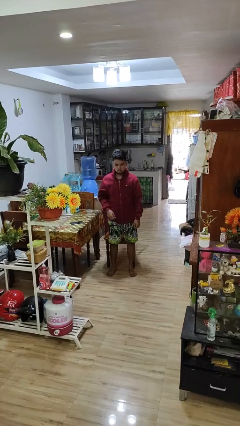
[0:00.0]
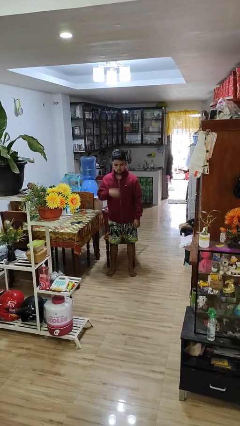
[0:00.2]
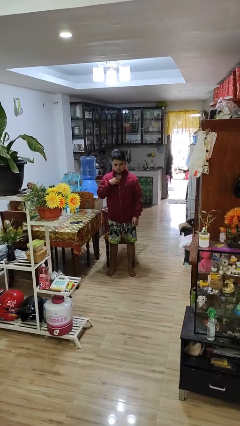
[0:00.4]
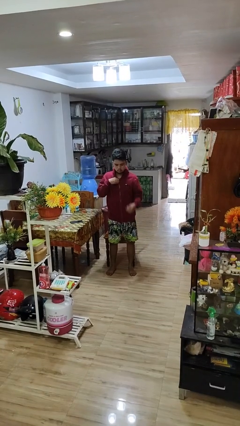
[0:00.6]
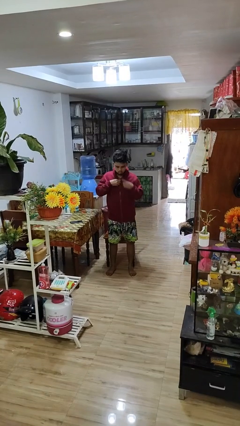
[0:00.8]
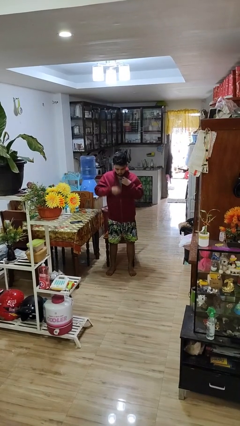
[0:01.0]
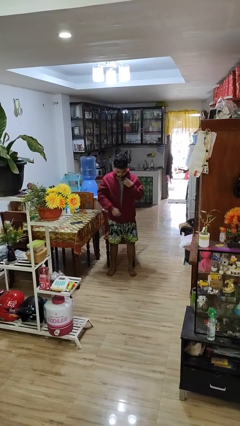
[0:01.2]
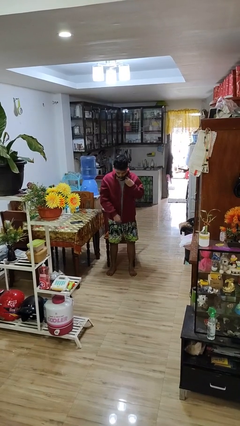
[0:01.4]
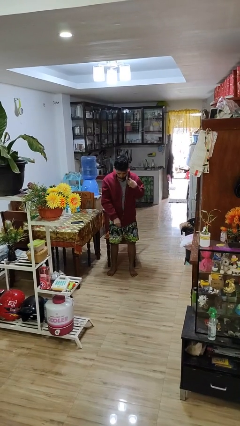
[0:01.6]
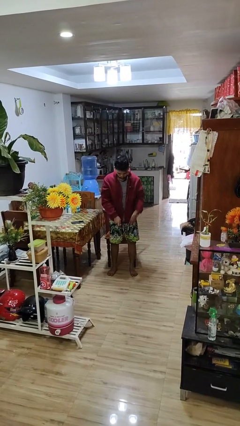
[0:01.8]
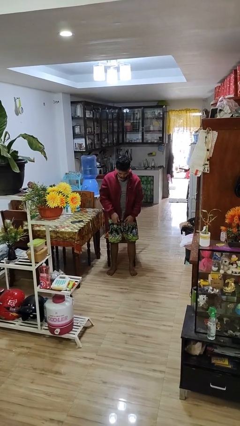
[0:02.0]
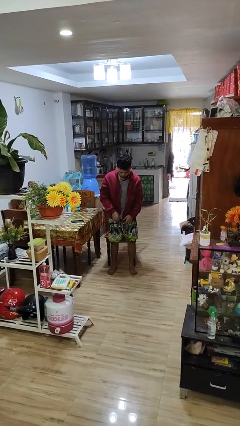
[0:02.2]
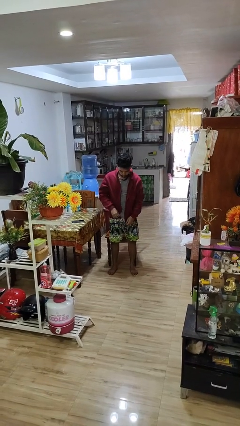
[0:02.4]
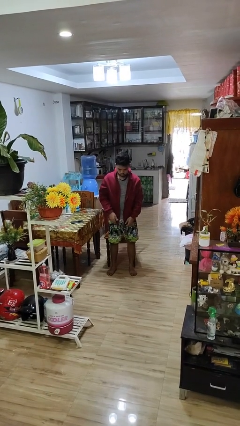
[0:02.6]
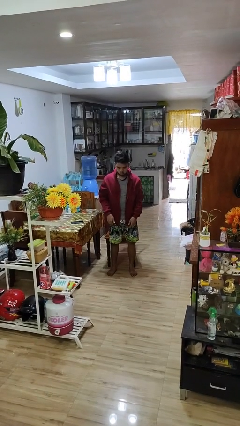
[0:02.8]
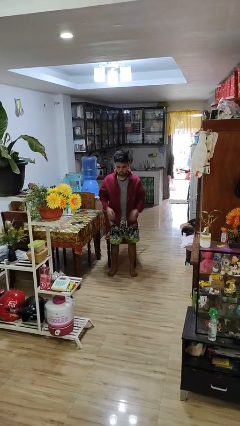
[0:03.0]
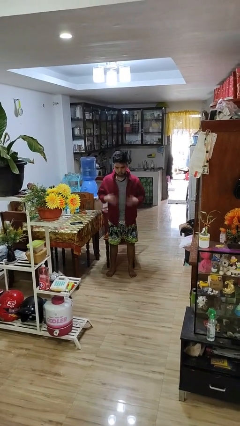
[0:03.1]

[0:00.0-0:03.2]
person unzips jacket

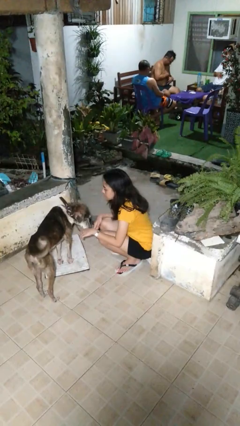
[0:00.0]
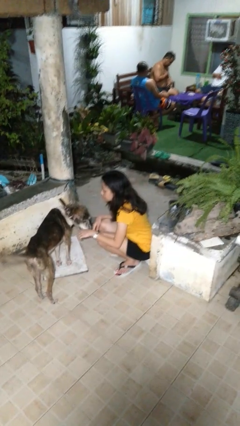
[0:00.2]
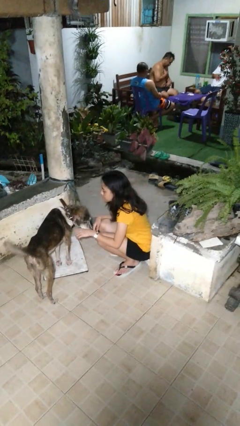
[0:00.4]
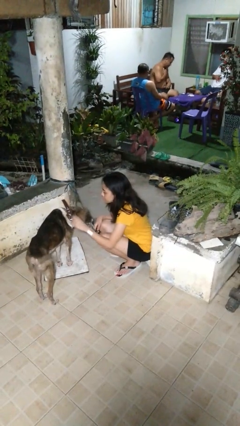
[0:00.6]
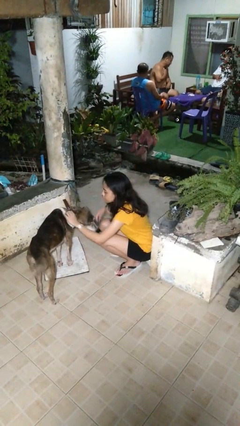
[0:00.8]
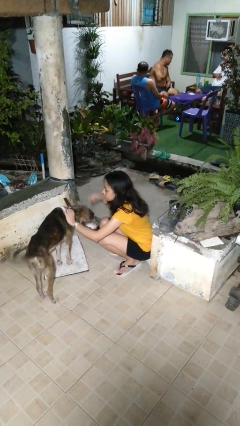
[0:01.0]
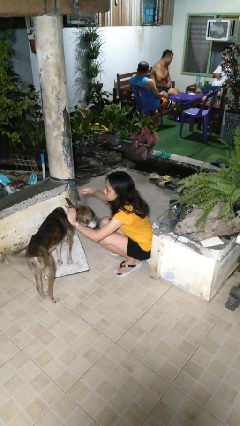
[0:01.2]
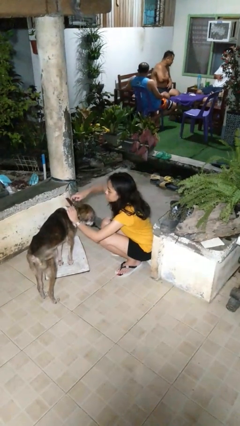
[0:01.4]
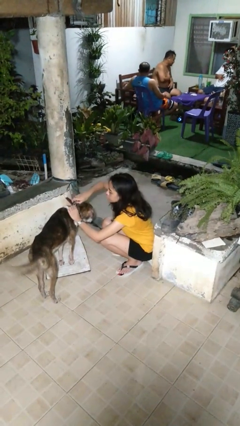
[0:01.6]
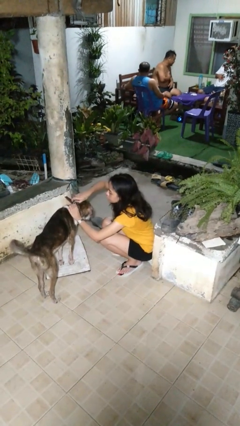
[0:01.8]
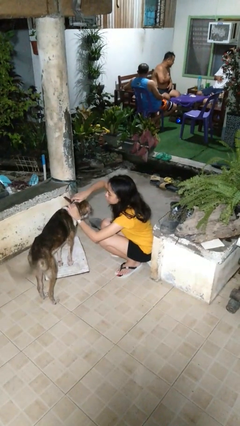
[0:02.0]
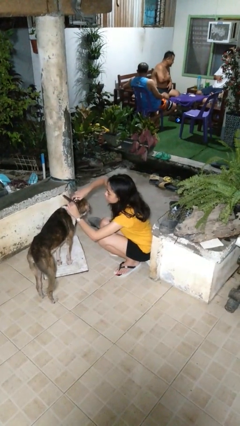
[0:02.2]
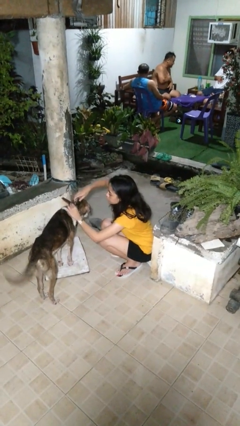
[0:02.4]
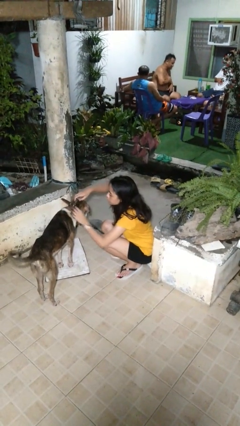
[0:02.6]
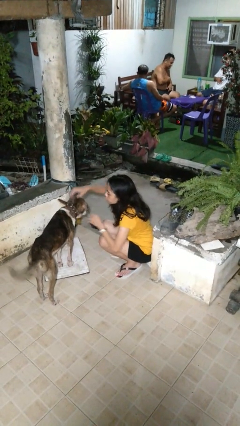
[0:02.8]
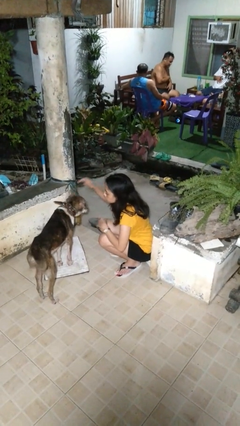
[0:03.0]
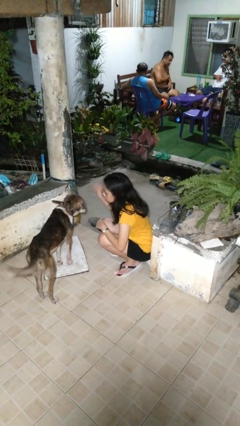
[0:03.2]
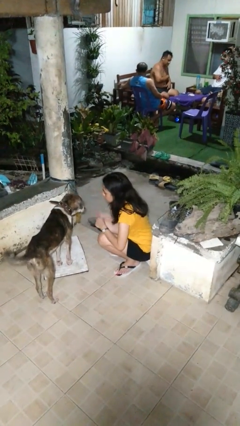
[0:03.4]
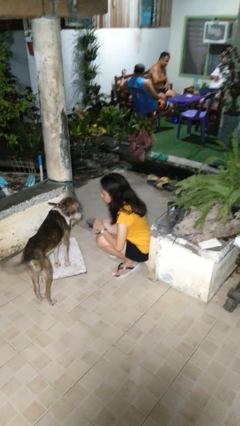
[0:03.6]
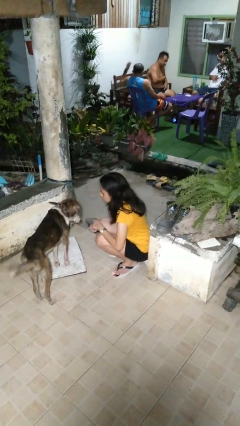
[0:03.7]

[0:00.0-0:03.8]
person attaches leash to dog

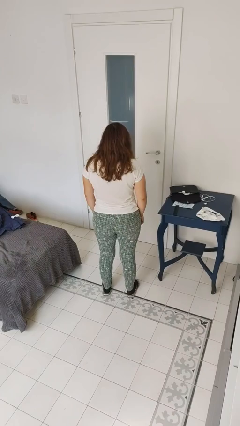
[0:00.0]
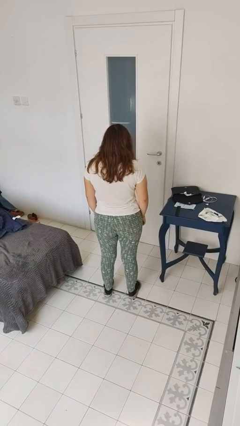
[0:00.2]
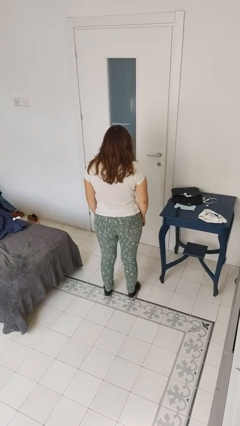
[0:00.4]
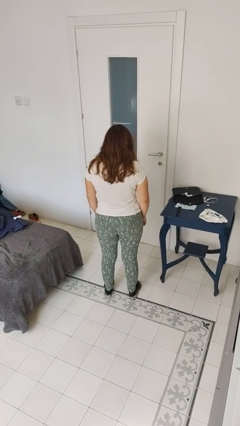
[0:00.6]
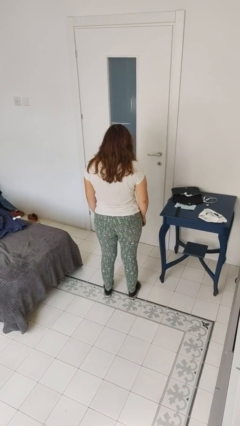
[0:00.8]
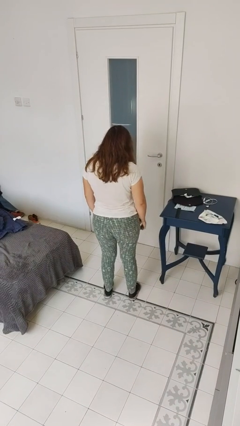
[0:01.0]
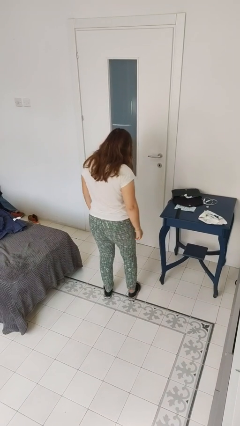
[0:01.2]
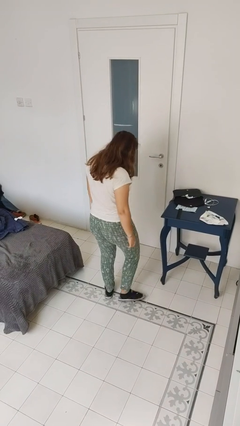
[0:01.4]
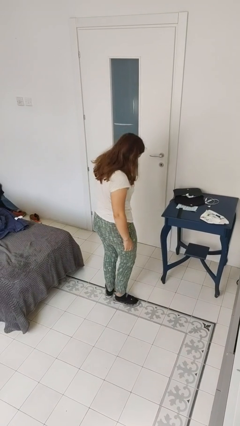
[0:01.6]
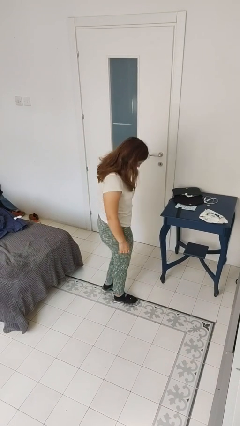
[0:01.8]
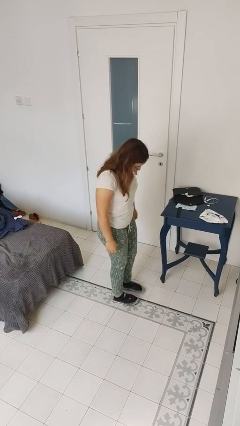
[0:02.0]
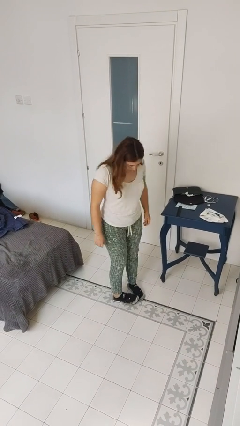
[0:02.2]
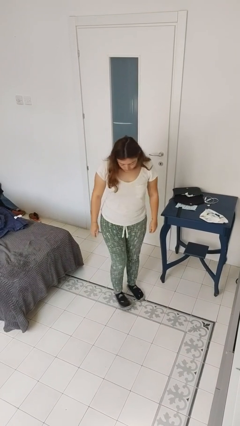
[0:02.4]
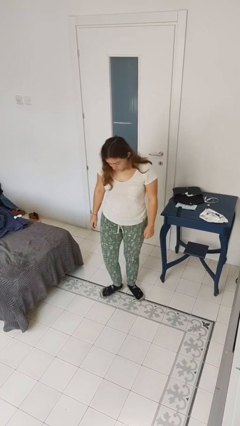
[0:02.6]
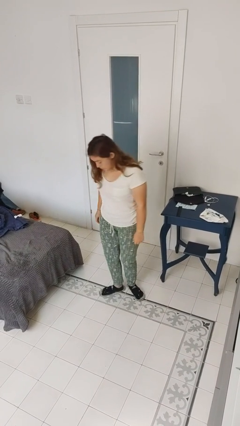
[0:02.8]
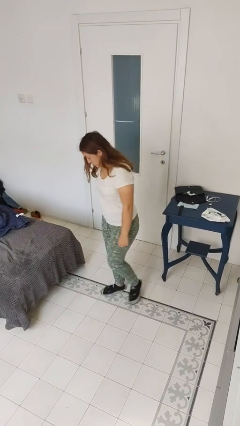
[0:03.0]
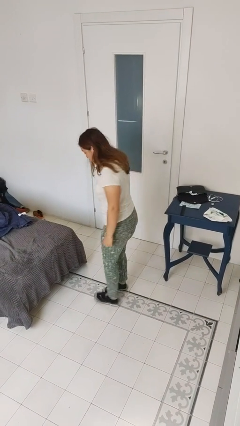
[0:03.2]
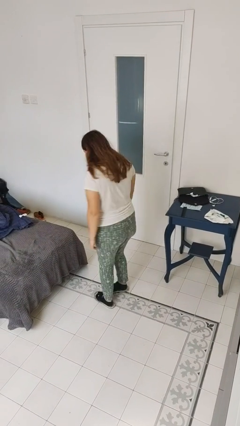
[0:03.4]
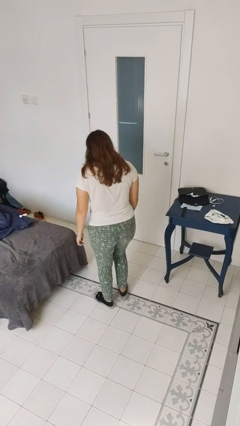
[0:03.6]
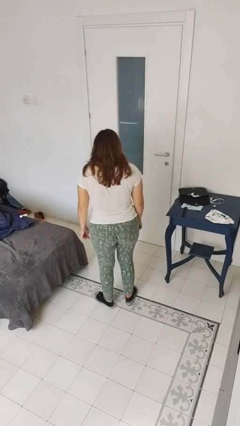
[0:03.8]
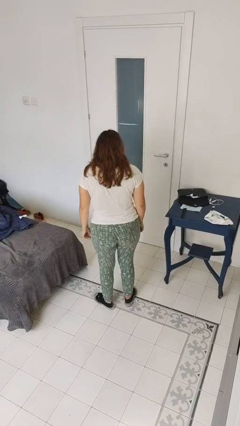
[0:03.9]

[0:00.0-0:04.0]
person twirls

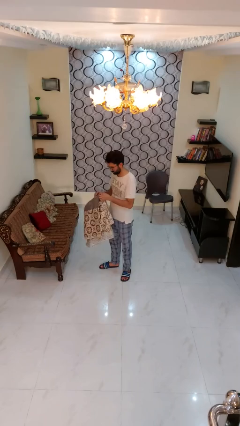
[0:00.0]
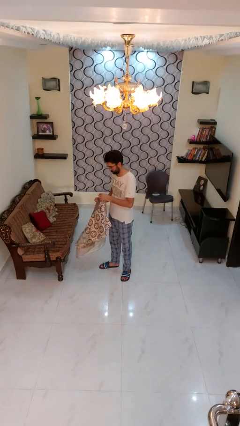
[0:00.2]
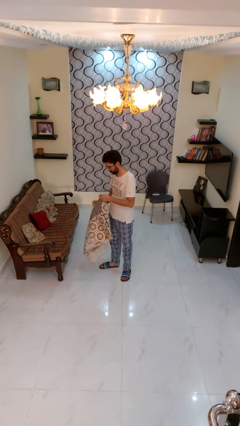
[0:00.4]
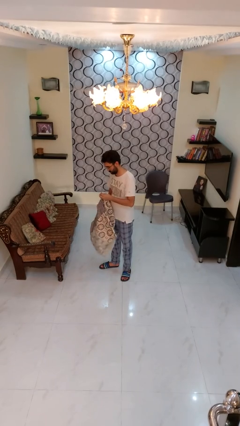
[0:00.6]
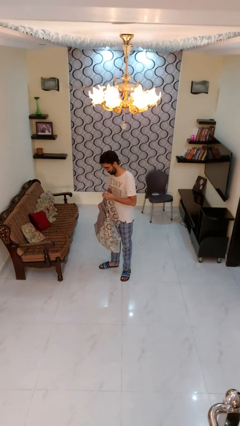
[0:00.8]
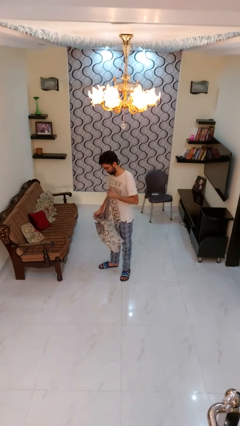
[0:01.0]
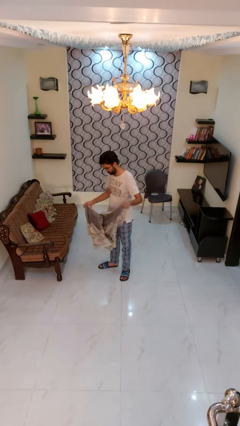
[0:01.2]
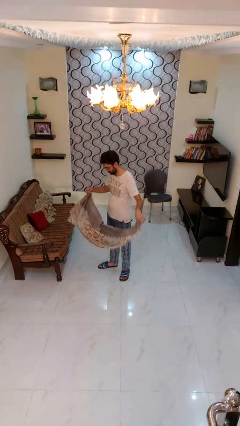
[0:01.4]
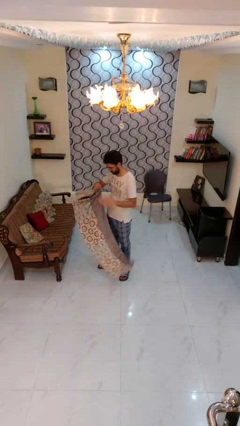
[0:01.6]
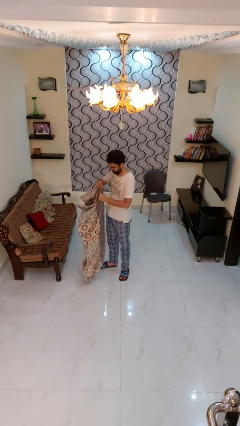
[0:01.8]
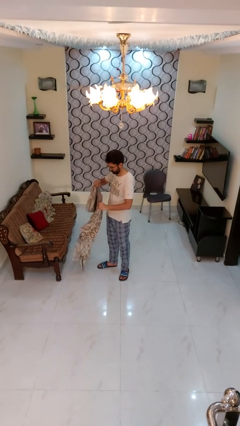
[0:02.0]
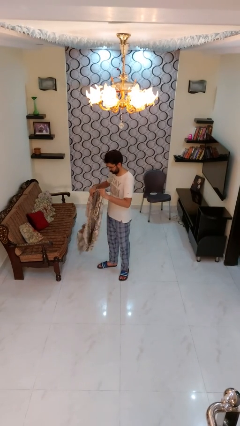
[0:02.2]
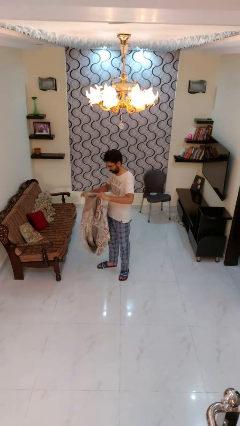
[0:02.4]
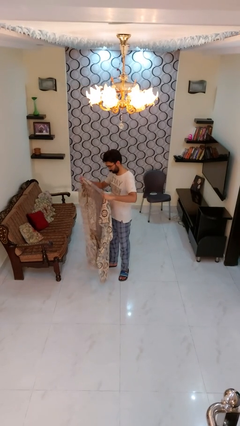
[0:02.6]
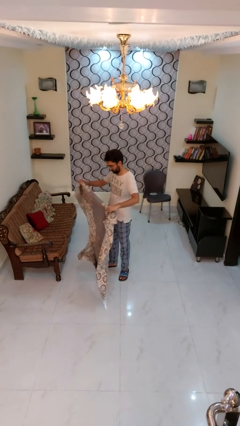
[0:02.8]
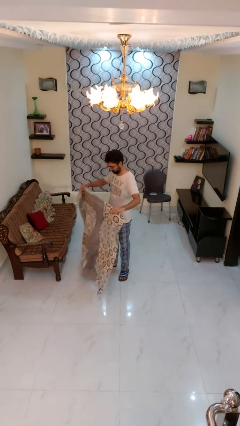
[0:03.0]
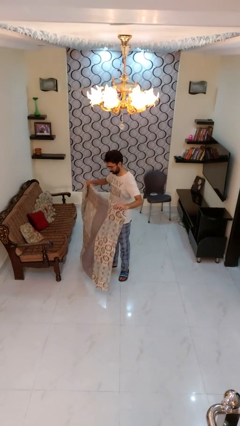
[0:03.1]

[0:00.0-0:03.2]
person unfolds blanket

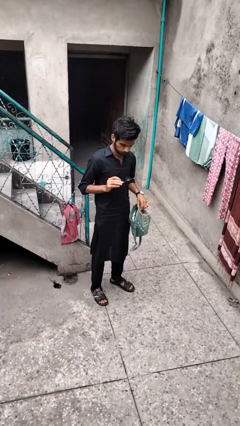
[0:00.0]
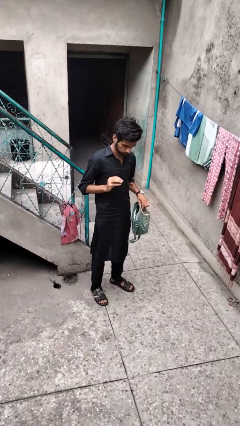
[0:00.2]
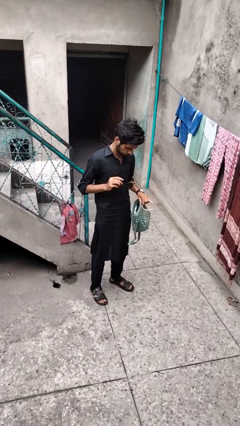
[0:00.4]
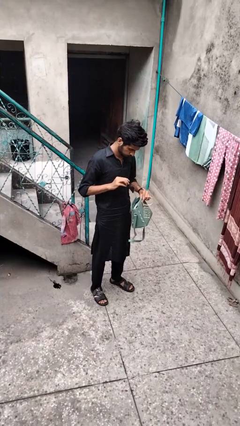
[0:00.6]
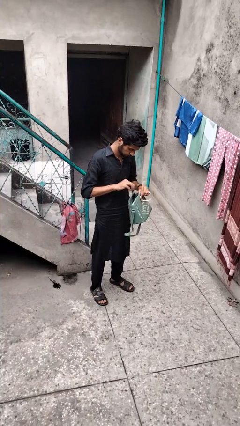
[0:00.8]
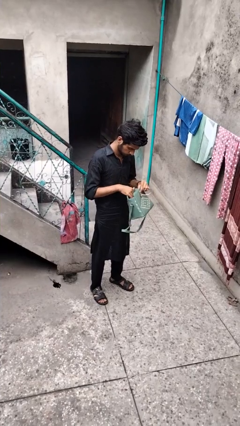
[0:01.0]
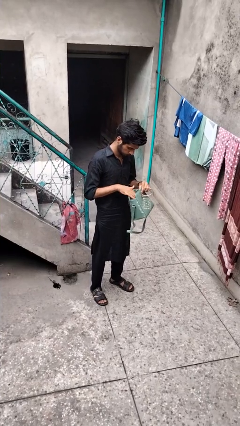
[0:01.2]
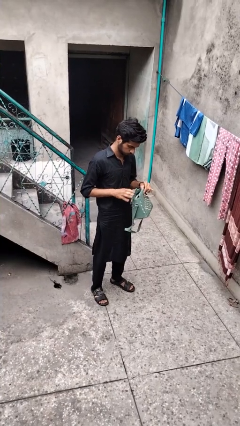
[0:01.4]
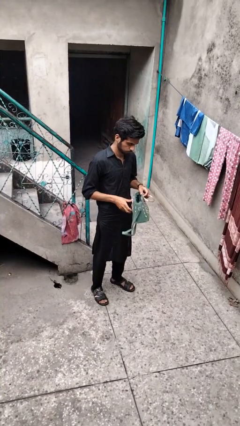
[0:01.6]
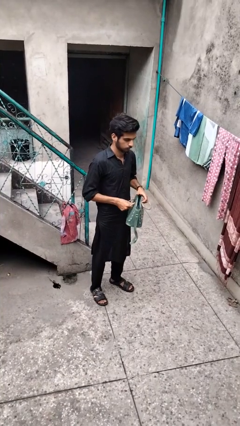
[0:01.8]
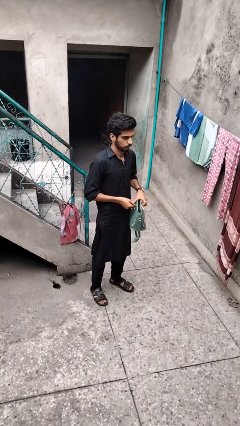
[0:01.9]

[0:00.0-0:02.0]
person puts object into purse

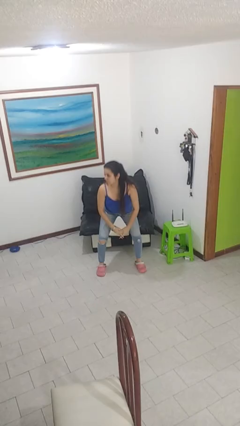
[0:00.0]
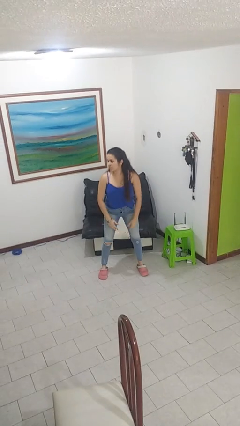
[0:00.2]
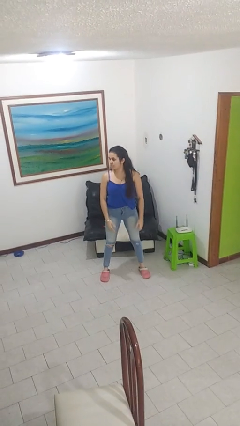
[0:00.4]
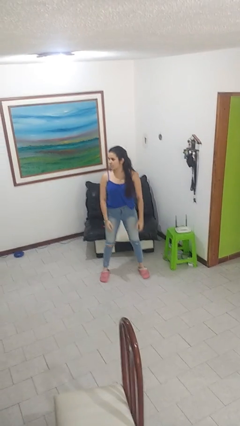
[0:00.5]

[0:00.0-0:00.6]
person stands up

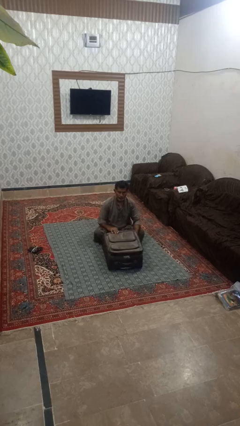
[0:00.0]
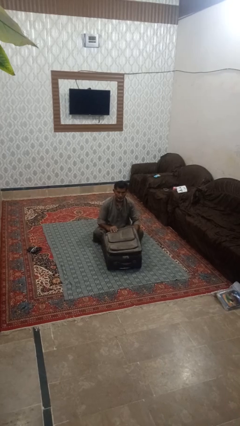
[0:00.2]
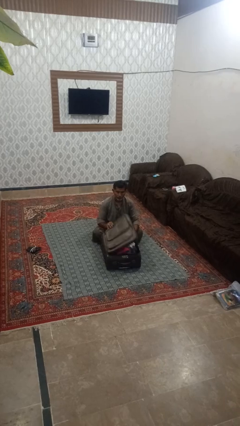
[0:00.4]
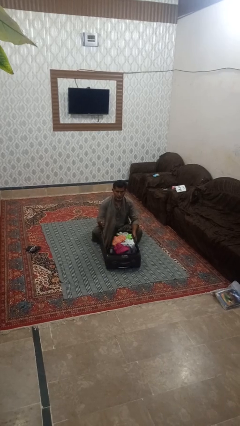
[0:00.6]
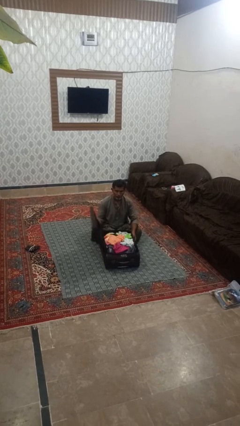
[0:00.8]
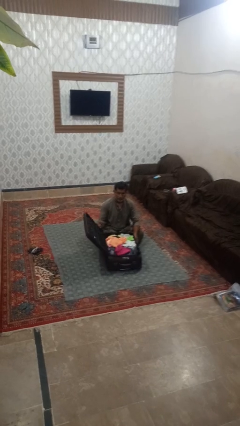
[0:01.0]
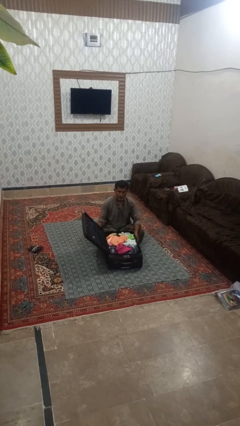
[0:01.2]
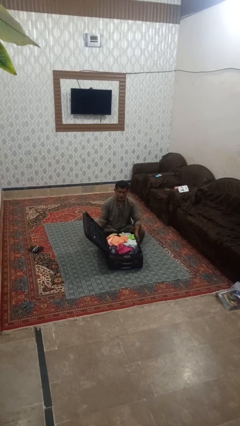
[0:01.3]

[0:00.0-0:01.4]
person opens suitcase
